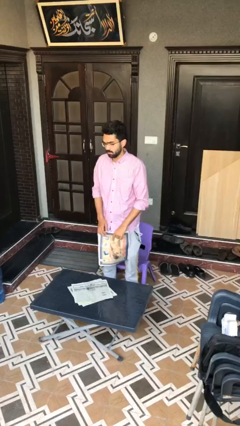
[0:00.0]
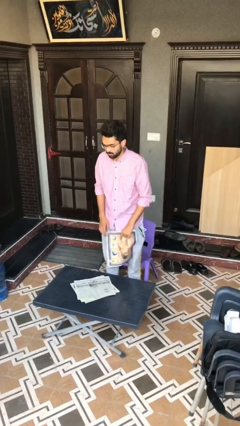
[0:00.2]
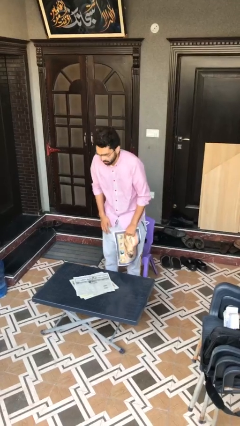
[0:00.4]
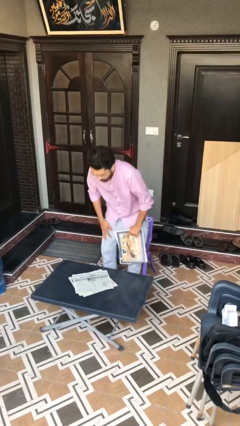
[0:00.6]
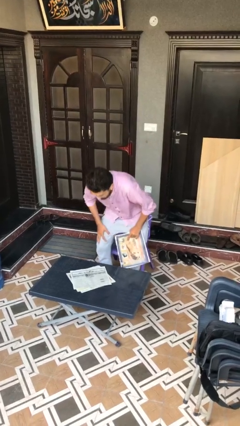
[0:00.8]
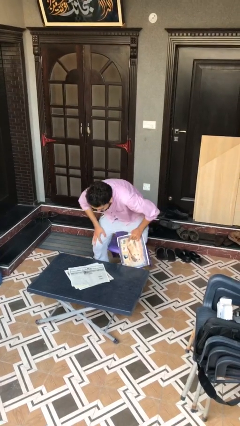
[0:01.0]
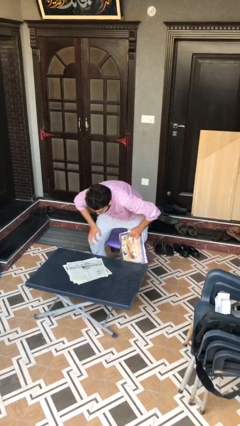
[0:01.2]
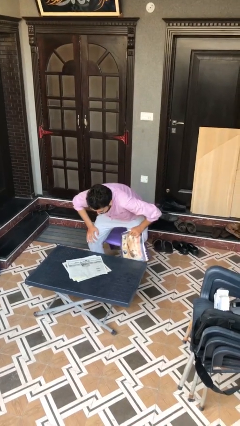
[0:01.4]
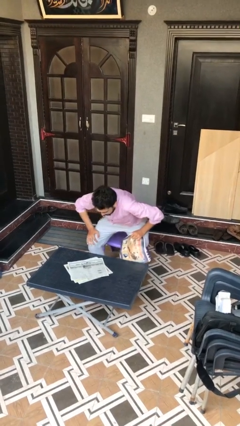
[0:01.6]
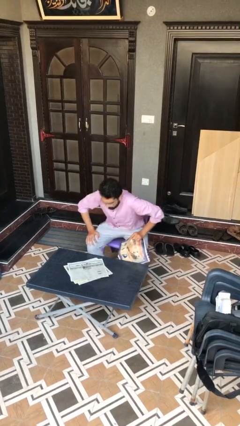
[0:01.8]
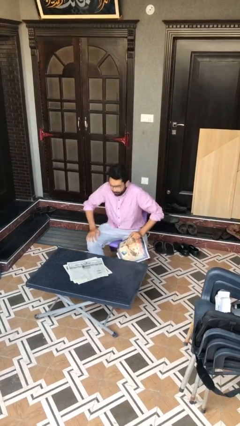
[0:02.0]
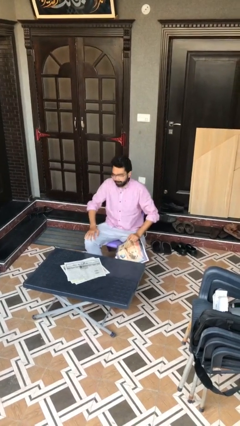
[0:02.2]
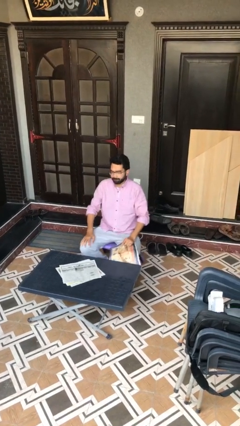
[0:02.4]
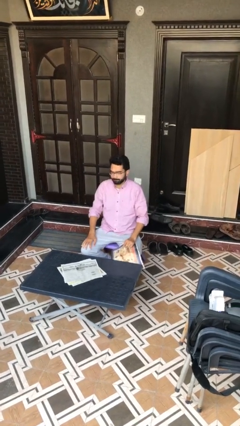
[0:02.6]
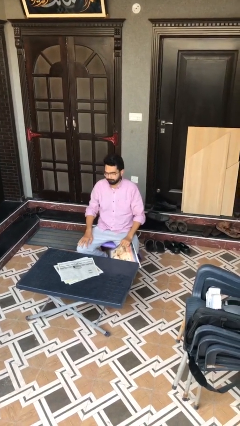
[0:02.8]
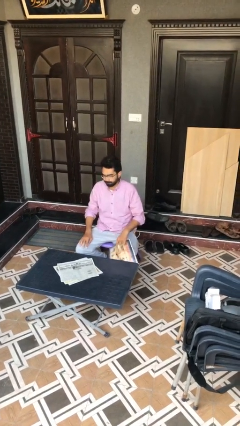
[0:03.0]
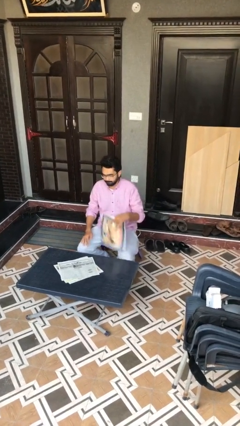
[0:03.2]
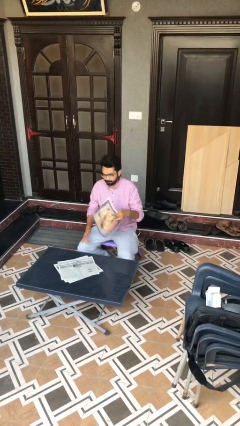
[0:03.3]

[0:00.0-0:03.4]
person sits down

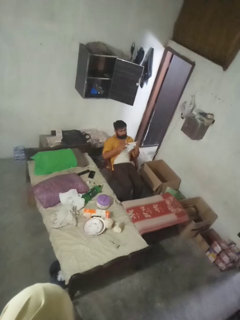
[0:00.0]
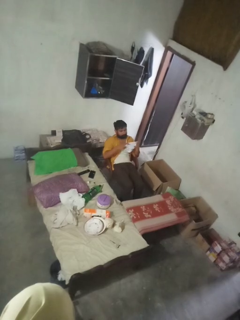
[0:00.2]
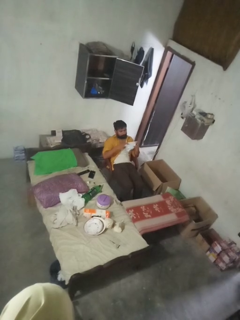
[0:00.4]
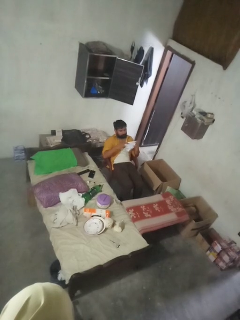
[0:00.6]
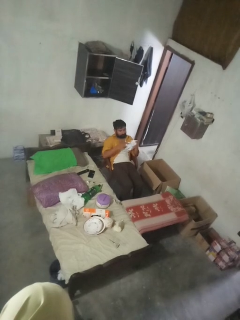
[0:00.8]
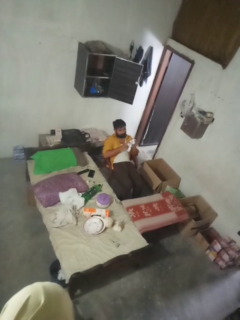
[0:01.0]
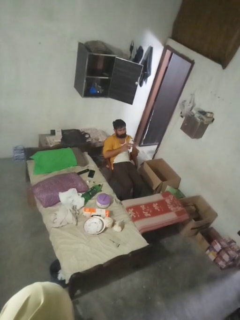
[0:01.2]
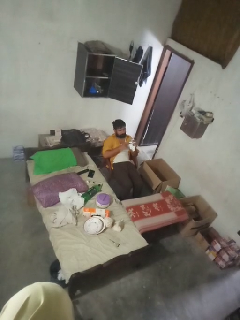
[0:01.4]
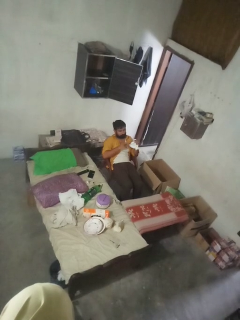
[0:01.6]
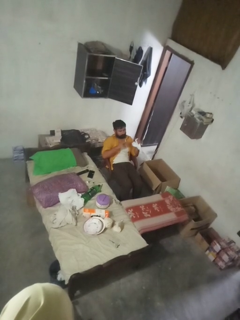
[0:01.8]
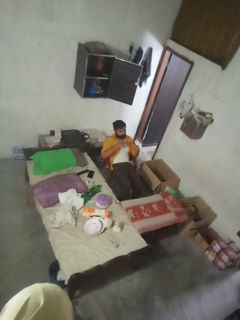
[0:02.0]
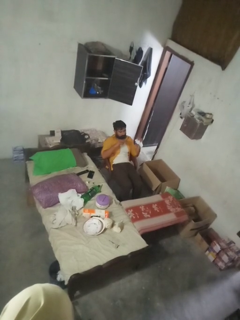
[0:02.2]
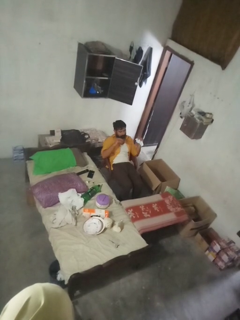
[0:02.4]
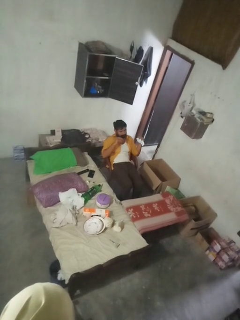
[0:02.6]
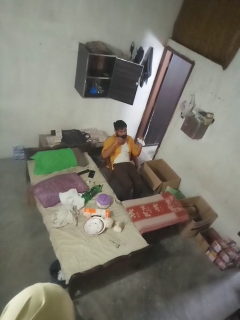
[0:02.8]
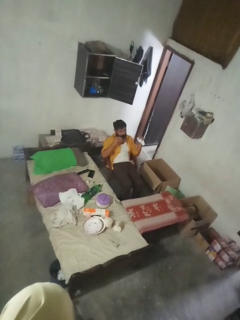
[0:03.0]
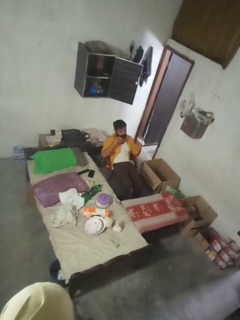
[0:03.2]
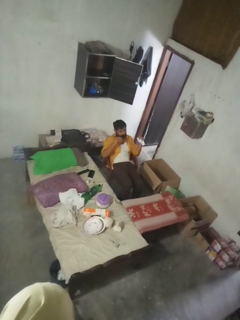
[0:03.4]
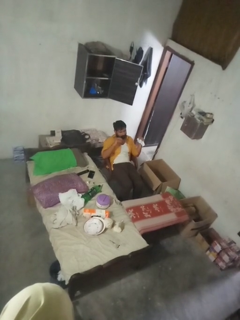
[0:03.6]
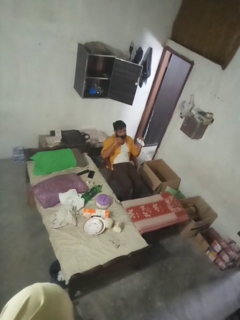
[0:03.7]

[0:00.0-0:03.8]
person crumples paper

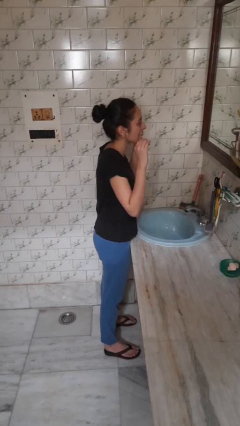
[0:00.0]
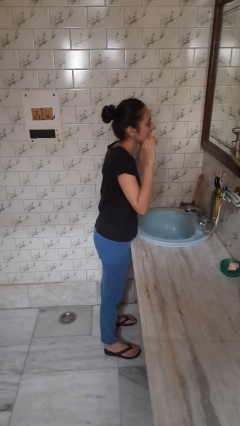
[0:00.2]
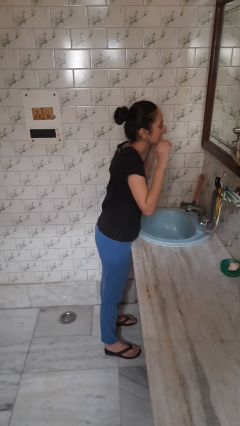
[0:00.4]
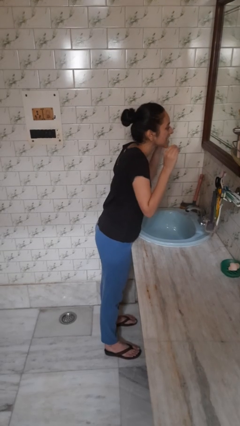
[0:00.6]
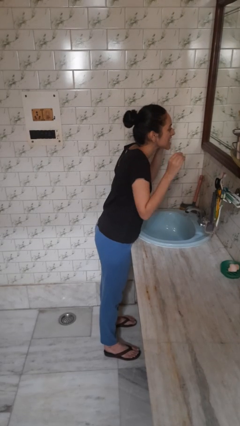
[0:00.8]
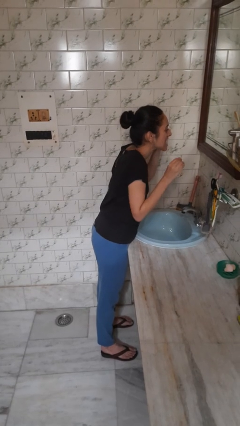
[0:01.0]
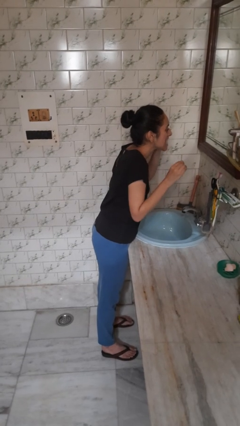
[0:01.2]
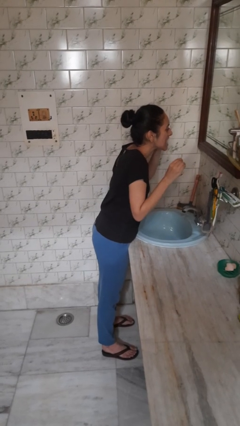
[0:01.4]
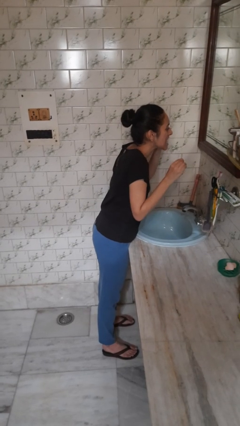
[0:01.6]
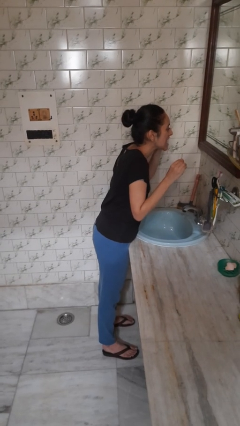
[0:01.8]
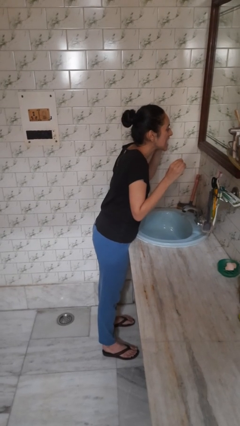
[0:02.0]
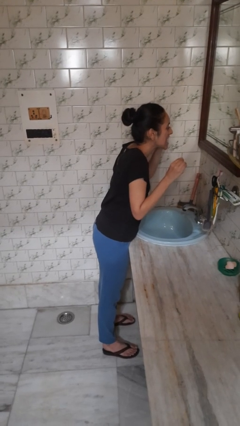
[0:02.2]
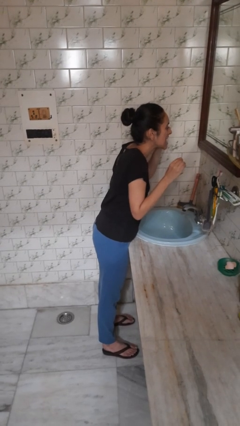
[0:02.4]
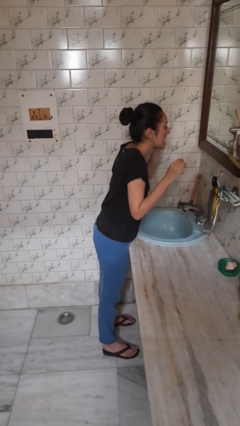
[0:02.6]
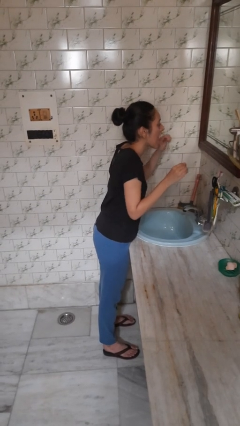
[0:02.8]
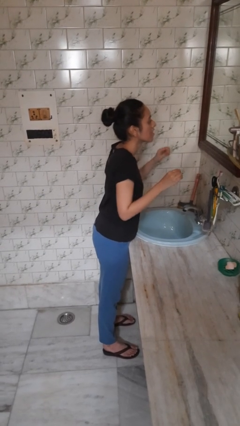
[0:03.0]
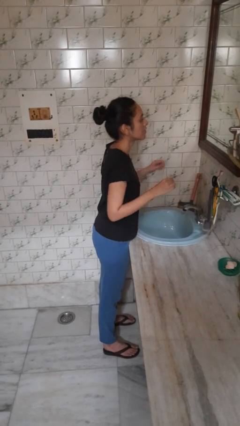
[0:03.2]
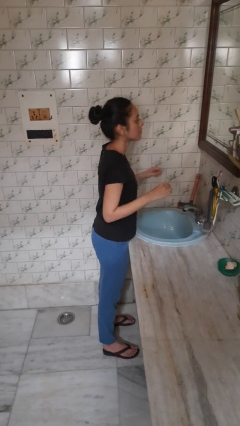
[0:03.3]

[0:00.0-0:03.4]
person flosses

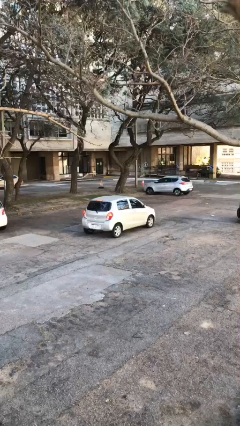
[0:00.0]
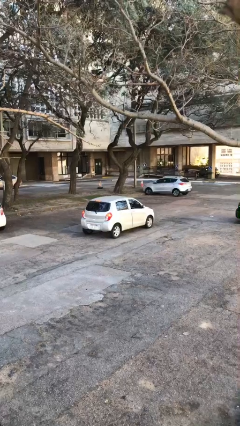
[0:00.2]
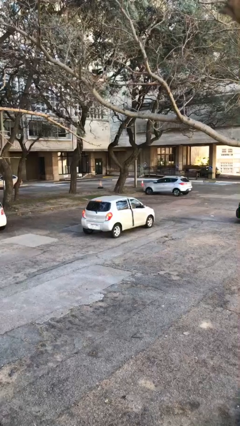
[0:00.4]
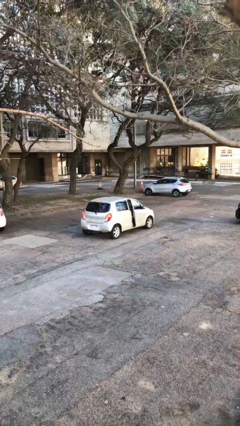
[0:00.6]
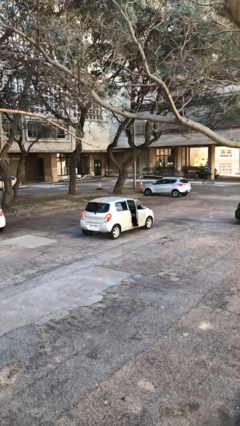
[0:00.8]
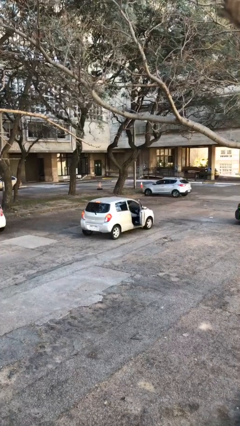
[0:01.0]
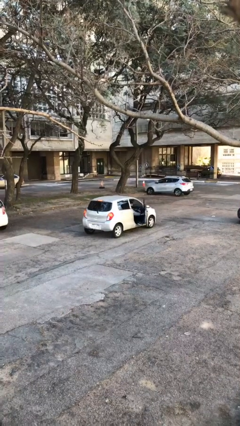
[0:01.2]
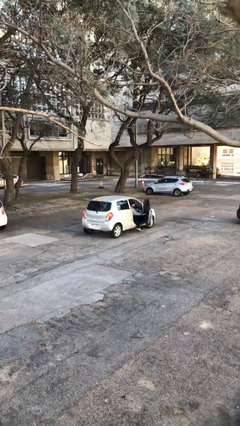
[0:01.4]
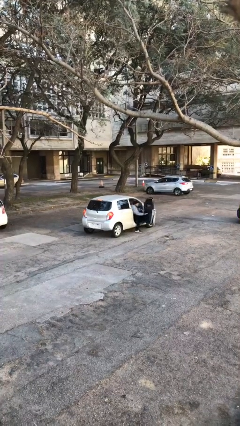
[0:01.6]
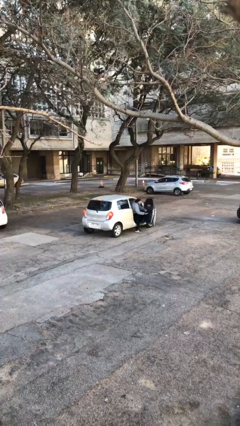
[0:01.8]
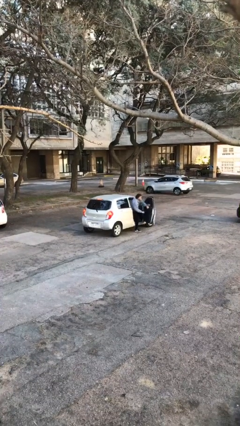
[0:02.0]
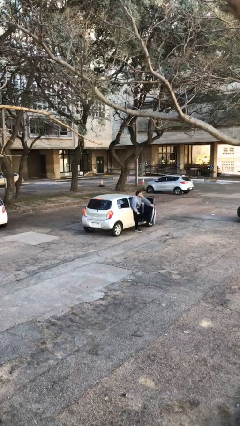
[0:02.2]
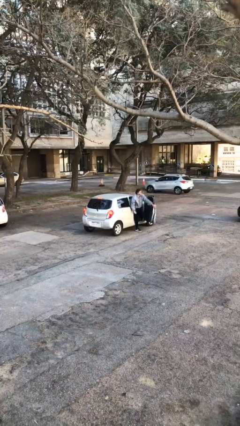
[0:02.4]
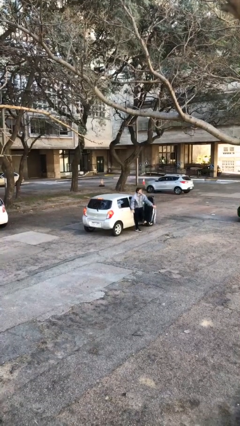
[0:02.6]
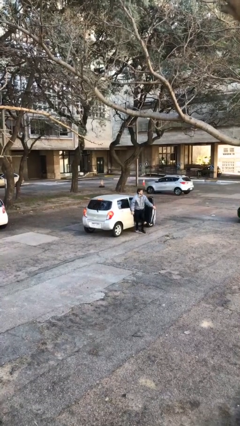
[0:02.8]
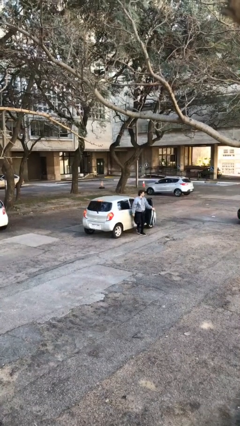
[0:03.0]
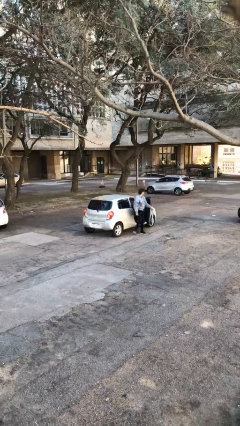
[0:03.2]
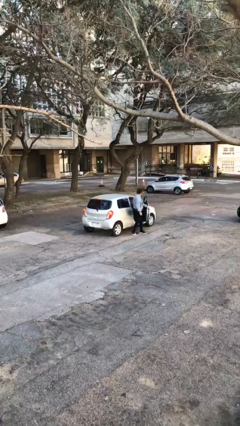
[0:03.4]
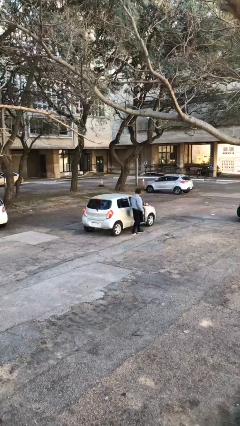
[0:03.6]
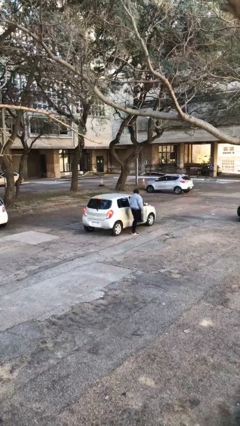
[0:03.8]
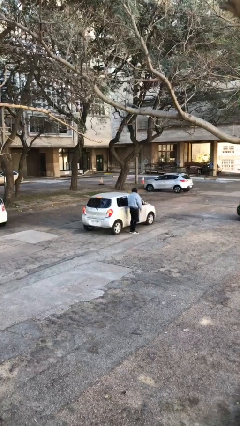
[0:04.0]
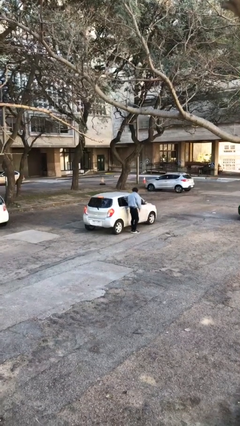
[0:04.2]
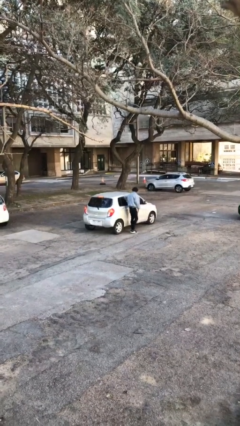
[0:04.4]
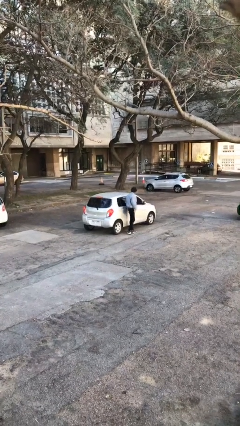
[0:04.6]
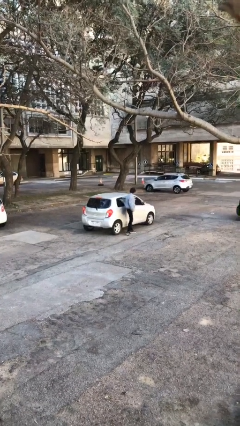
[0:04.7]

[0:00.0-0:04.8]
car drops off person

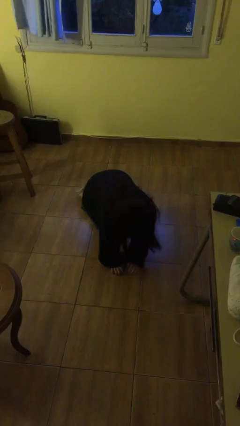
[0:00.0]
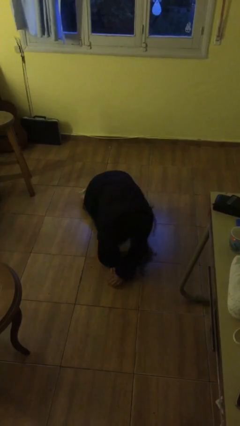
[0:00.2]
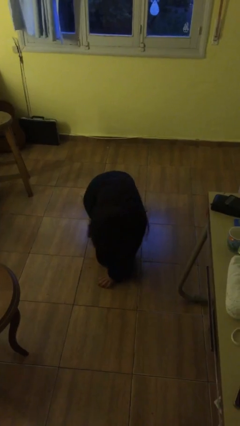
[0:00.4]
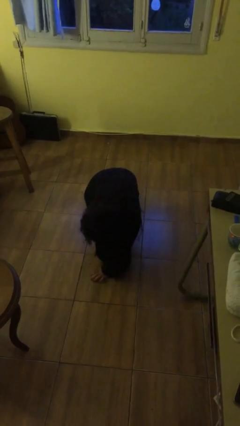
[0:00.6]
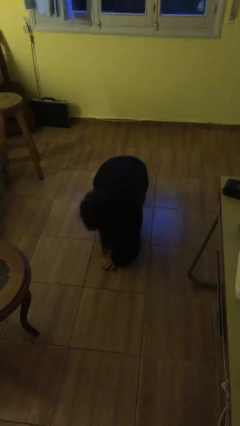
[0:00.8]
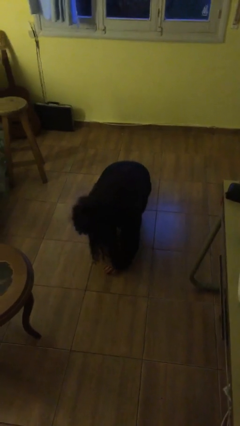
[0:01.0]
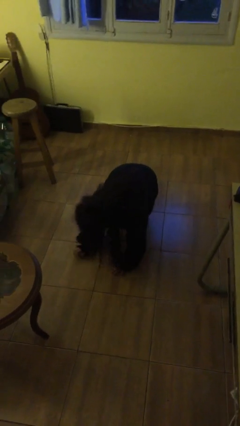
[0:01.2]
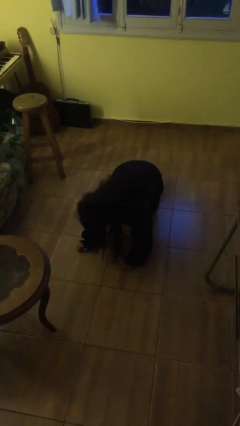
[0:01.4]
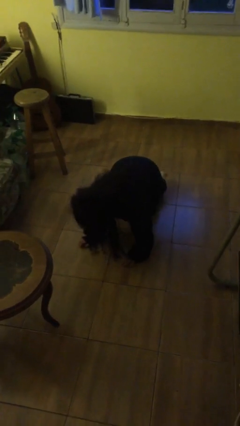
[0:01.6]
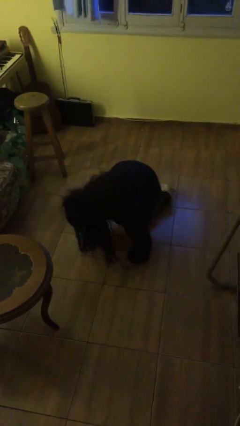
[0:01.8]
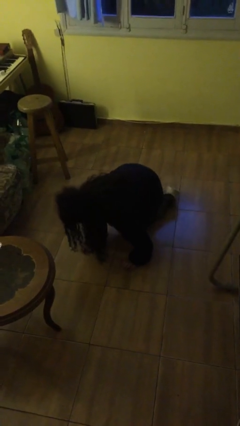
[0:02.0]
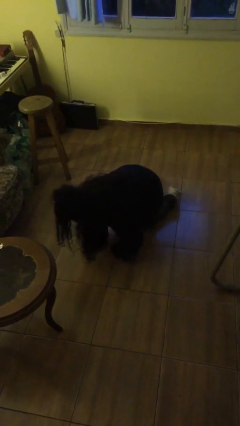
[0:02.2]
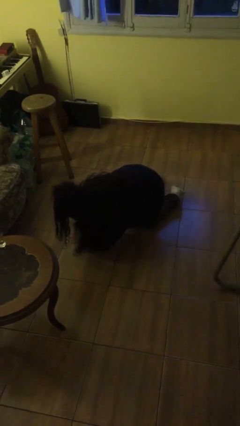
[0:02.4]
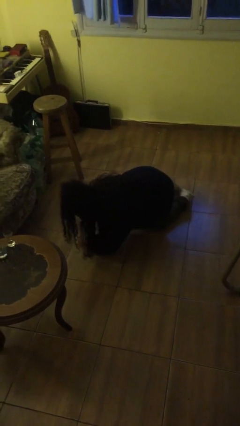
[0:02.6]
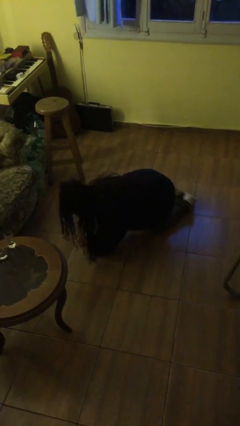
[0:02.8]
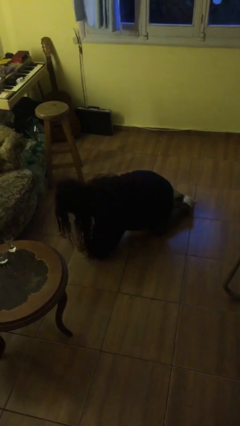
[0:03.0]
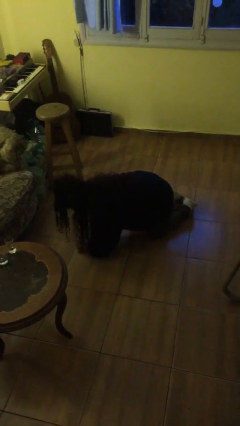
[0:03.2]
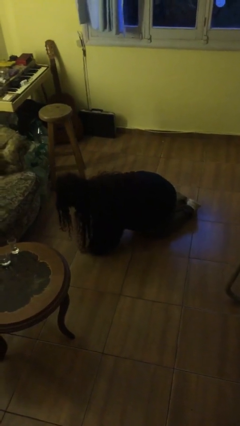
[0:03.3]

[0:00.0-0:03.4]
person crawls
